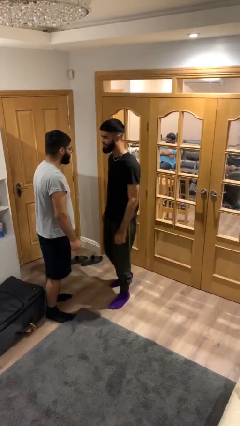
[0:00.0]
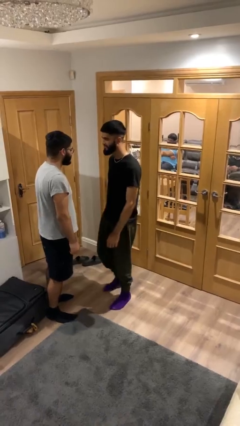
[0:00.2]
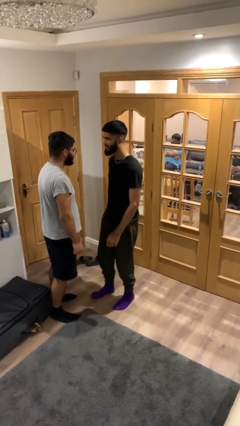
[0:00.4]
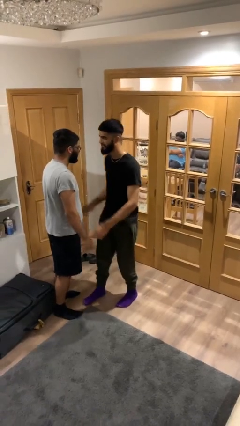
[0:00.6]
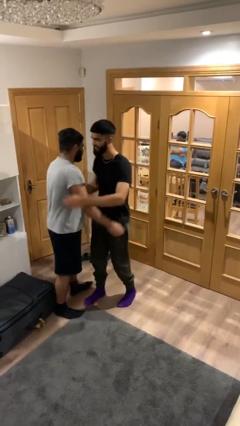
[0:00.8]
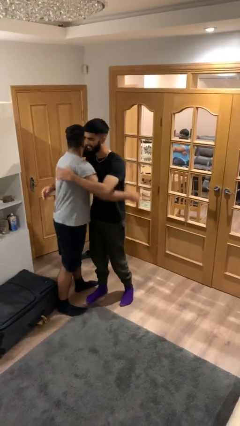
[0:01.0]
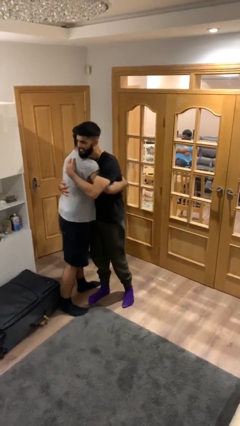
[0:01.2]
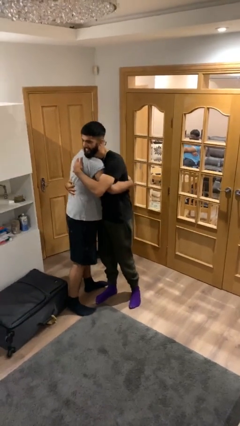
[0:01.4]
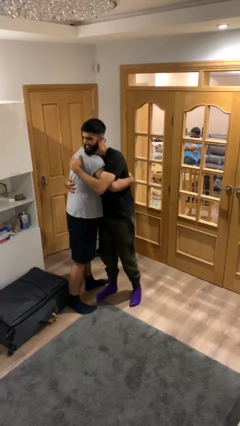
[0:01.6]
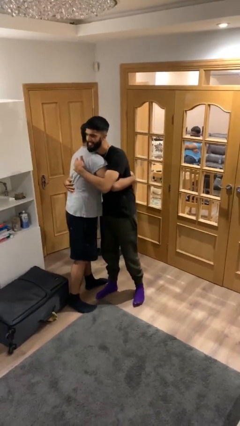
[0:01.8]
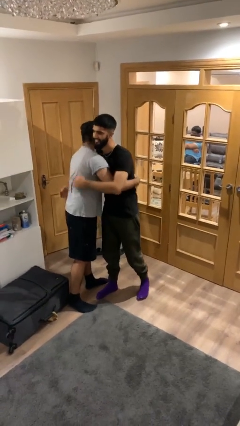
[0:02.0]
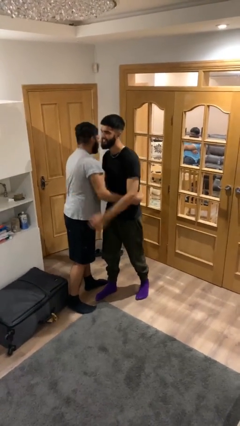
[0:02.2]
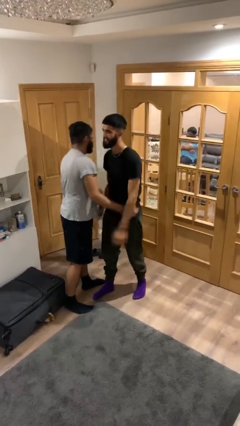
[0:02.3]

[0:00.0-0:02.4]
person embraces person

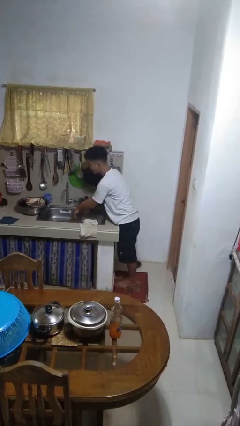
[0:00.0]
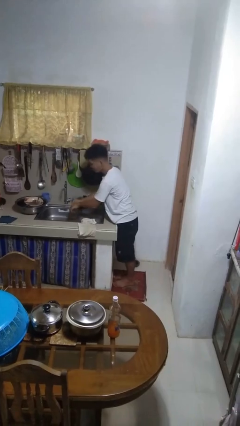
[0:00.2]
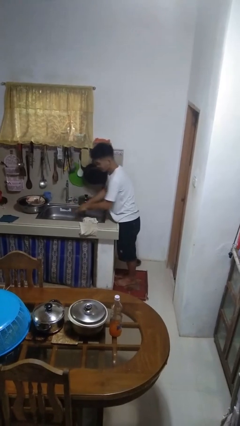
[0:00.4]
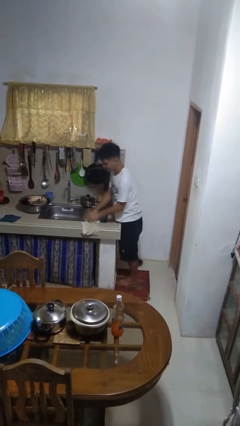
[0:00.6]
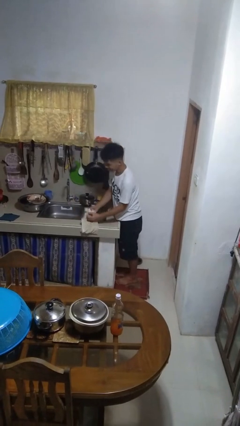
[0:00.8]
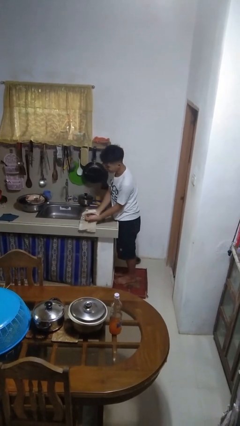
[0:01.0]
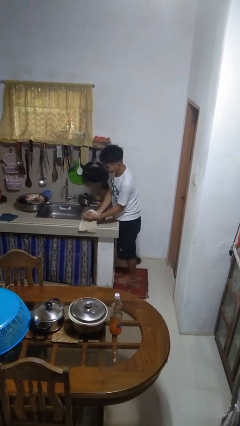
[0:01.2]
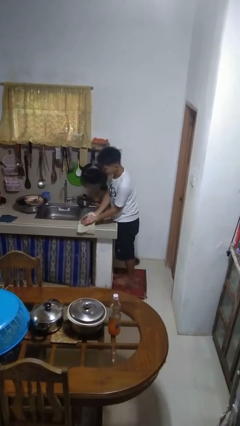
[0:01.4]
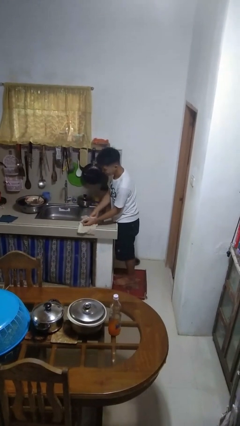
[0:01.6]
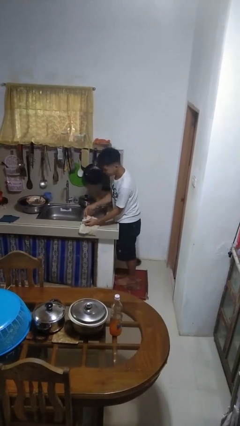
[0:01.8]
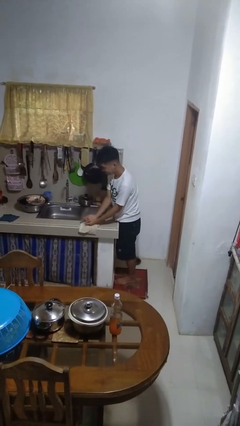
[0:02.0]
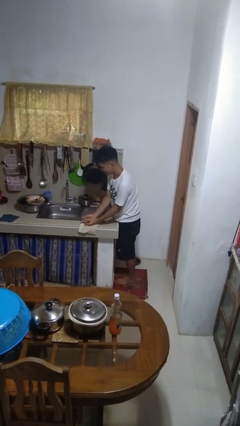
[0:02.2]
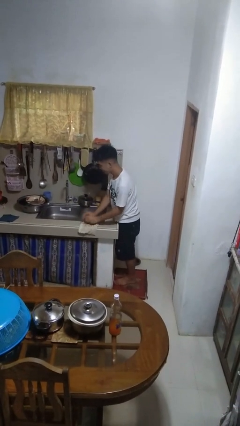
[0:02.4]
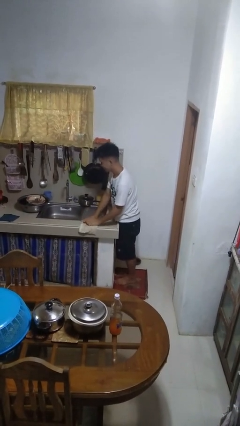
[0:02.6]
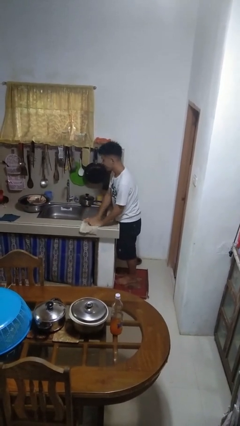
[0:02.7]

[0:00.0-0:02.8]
person dries hands with towel

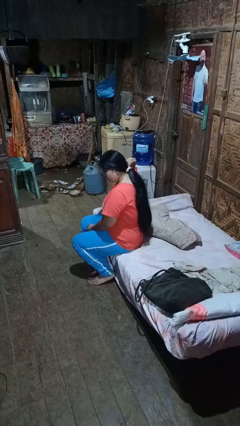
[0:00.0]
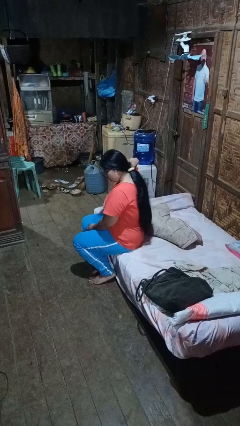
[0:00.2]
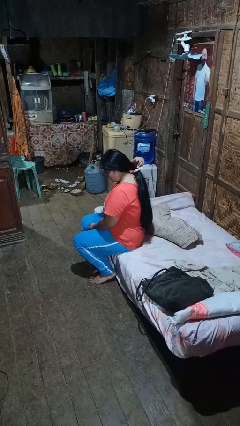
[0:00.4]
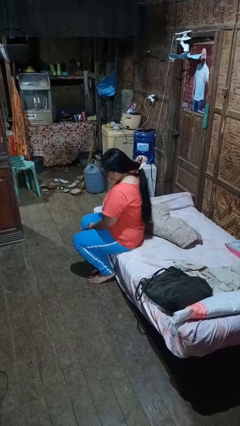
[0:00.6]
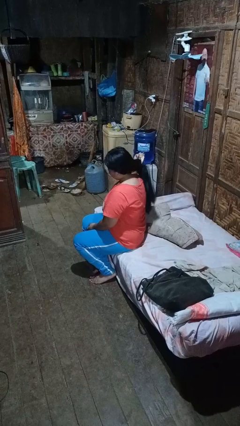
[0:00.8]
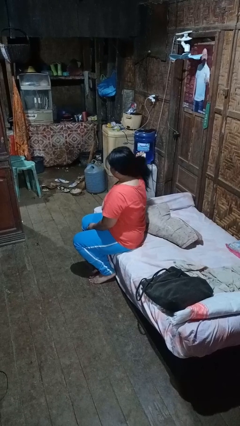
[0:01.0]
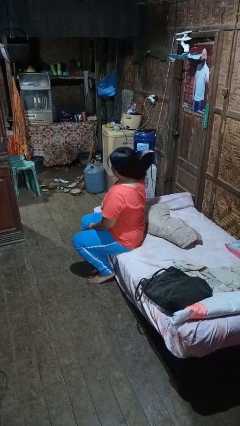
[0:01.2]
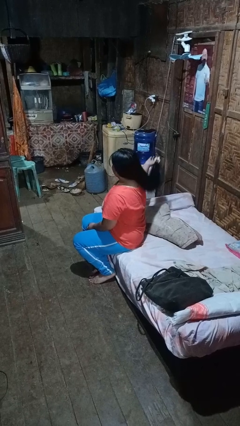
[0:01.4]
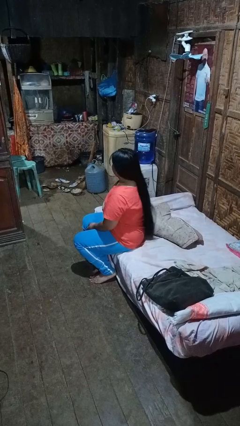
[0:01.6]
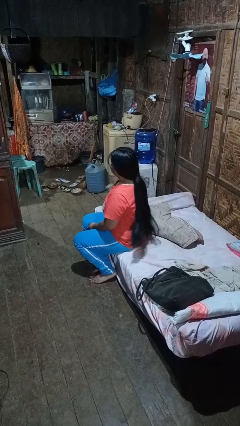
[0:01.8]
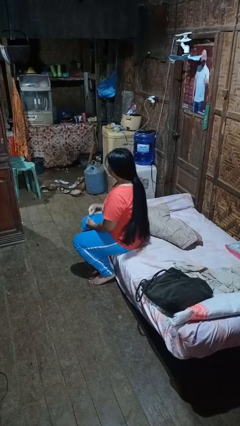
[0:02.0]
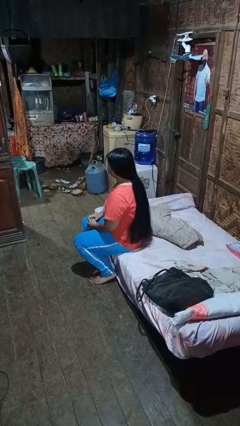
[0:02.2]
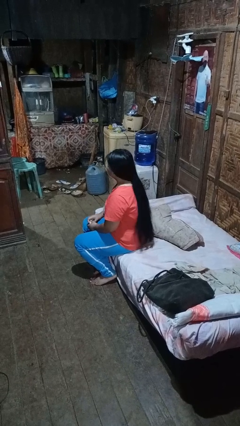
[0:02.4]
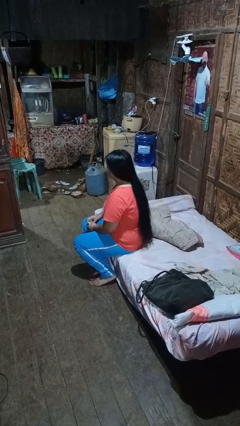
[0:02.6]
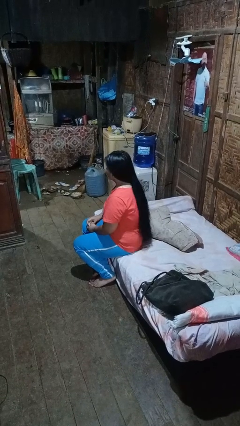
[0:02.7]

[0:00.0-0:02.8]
person takes off hairtie

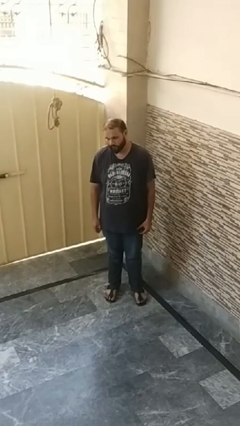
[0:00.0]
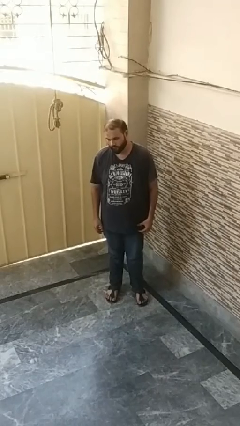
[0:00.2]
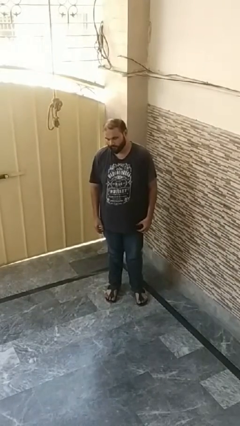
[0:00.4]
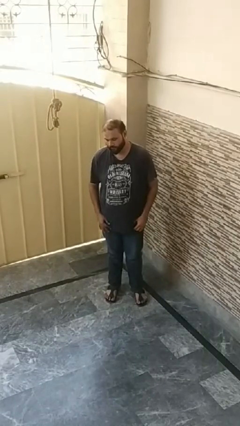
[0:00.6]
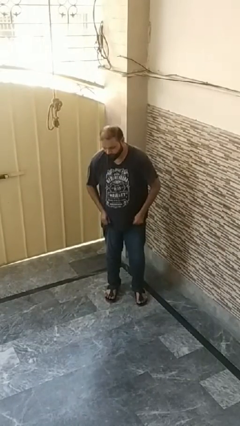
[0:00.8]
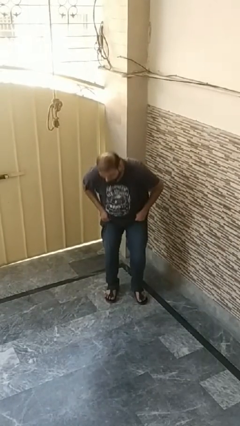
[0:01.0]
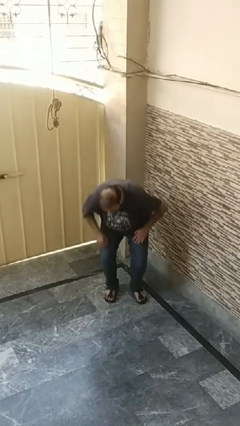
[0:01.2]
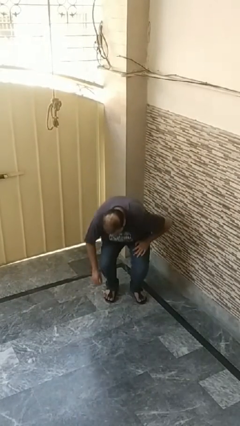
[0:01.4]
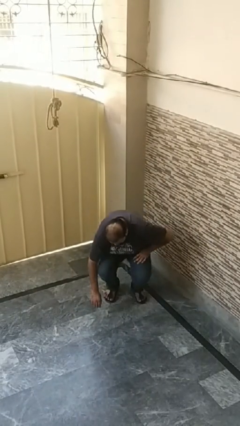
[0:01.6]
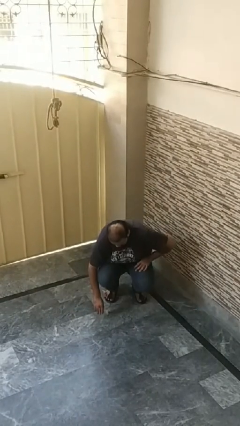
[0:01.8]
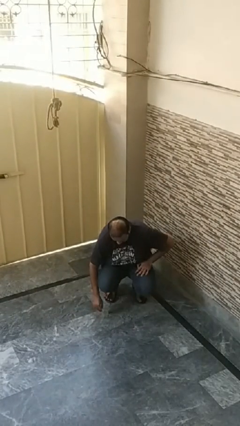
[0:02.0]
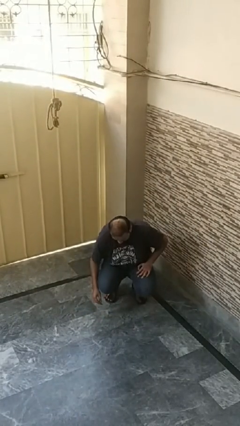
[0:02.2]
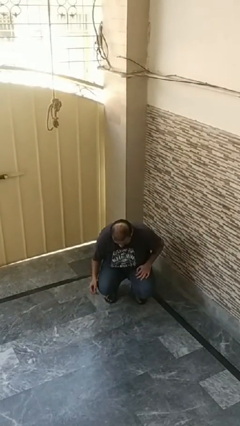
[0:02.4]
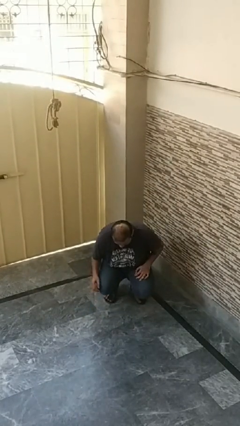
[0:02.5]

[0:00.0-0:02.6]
person falls while standing

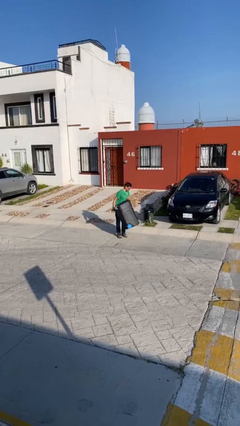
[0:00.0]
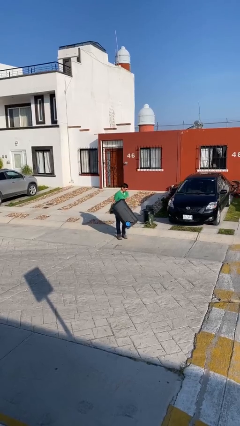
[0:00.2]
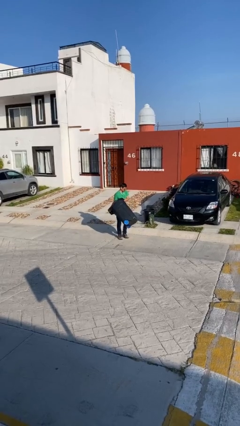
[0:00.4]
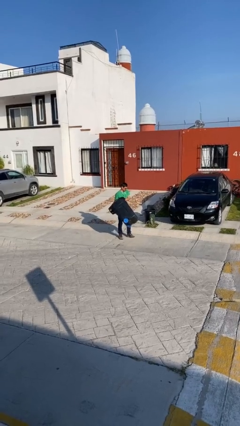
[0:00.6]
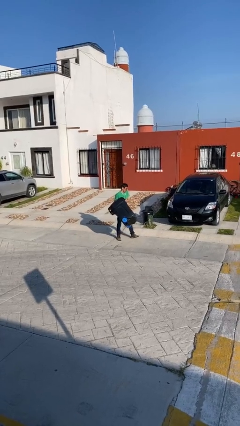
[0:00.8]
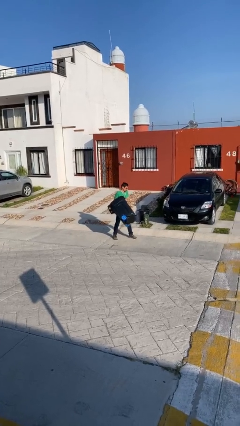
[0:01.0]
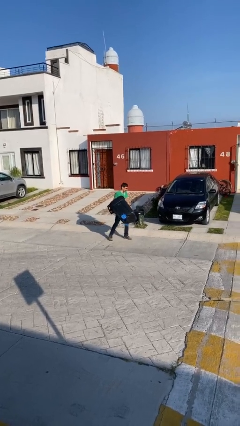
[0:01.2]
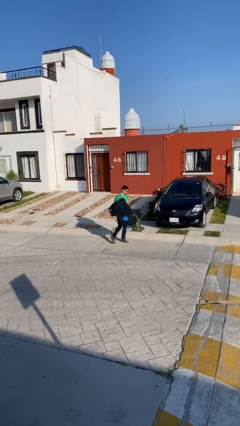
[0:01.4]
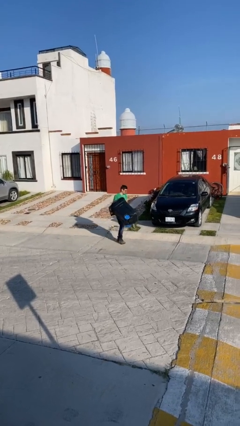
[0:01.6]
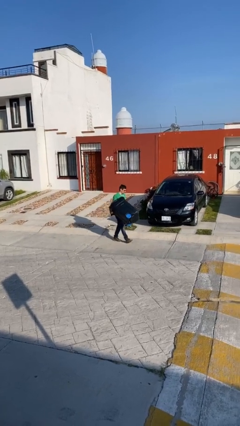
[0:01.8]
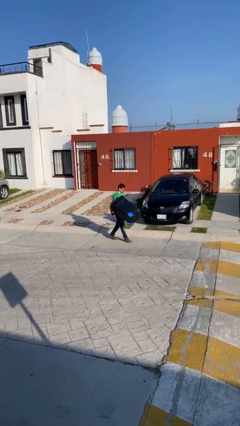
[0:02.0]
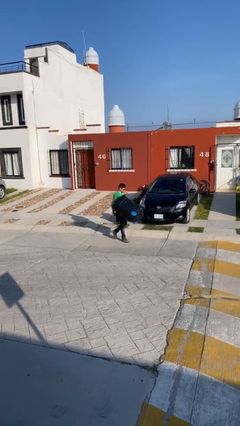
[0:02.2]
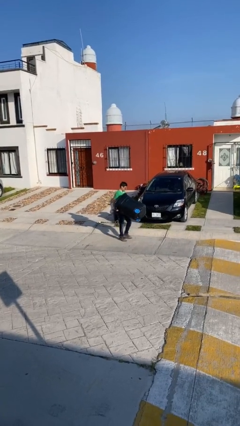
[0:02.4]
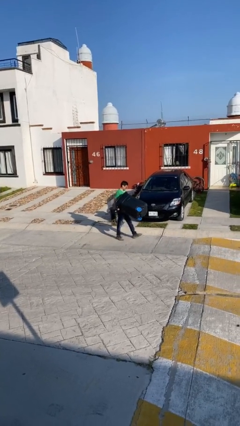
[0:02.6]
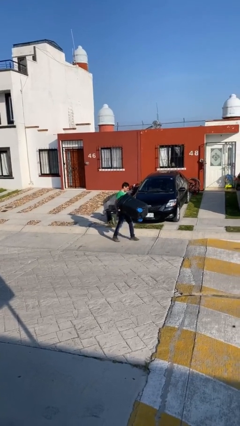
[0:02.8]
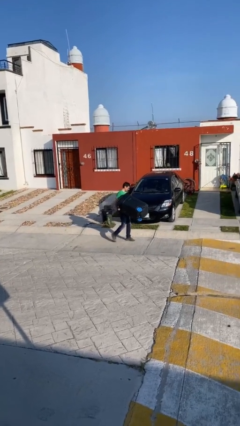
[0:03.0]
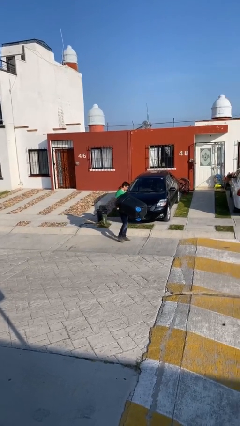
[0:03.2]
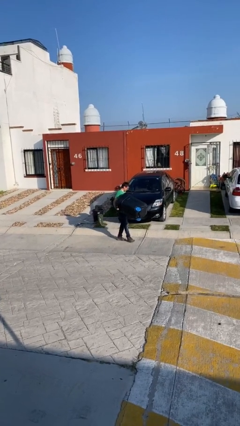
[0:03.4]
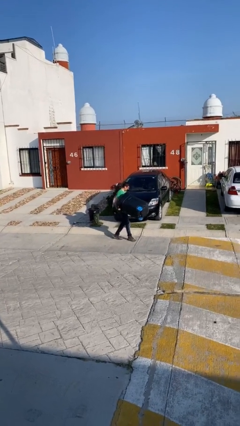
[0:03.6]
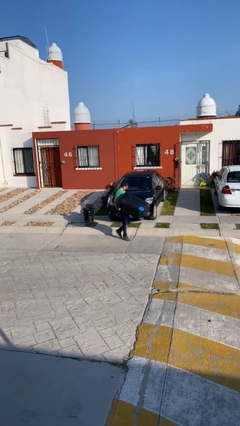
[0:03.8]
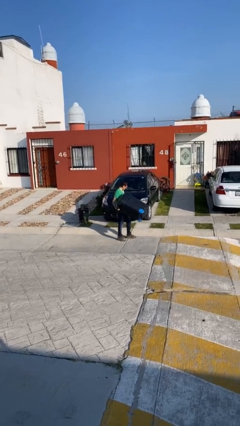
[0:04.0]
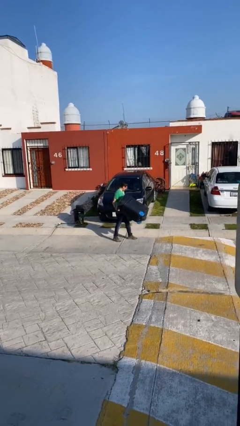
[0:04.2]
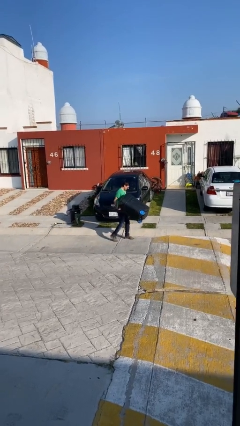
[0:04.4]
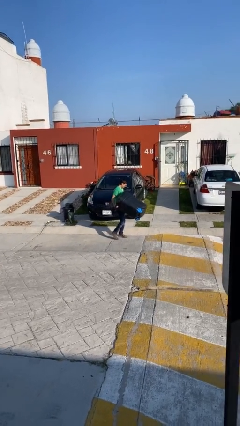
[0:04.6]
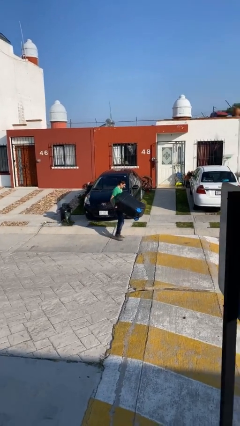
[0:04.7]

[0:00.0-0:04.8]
person carries heavy object

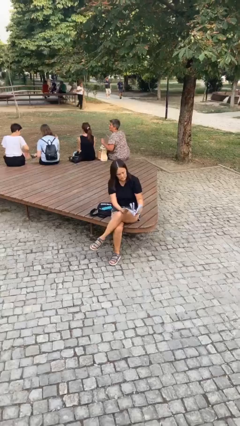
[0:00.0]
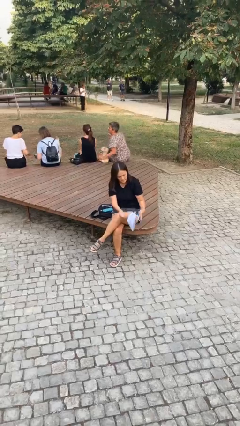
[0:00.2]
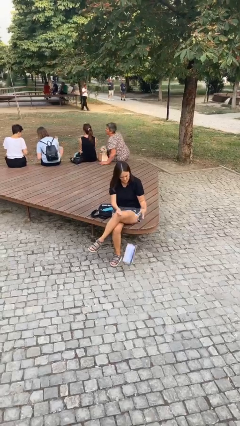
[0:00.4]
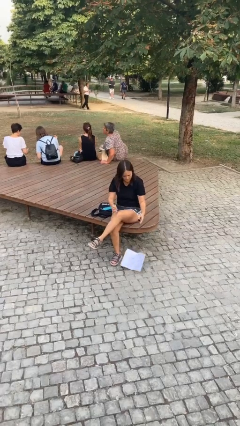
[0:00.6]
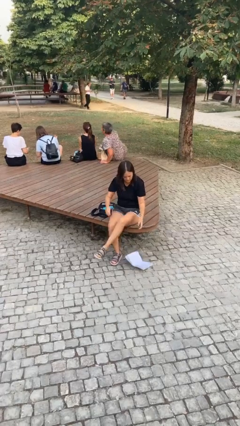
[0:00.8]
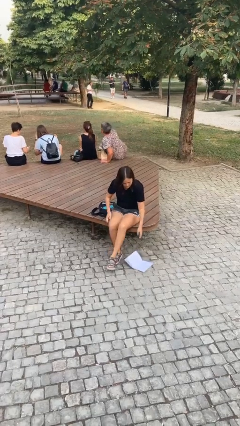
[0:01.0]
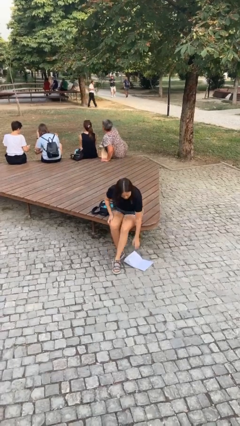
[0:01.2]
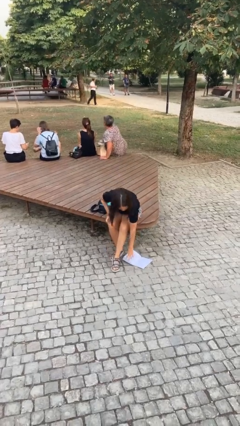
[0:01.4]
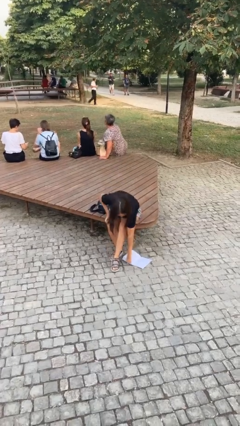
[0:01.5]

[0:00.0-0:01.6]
person drops object

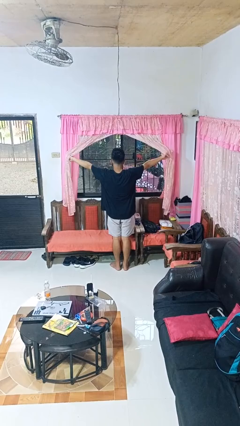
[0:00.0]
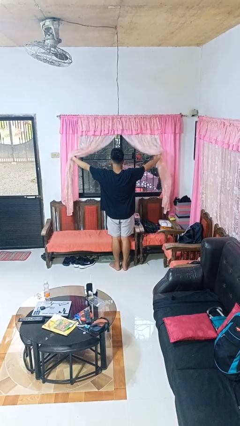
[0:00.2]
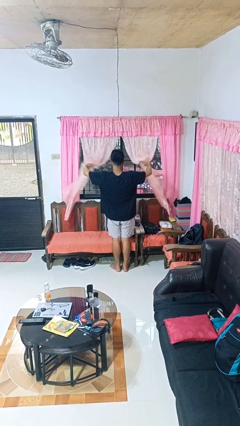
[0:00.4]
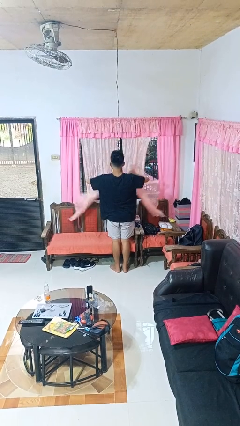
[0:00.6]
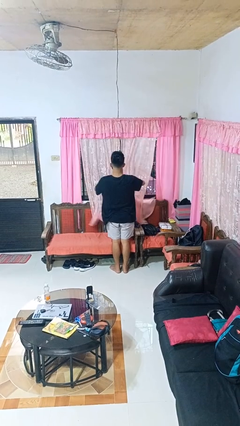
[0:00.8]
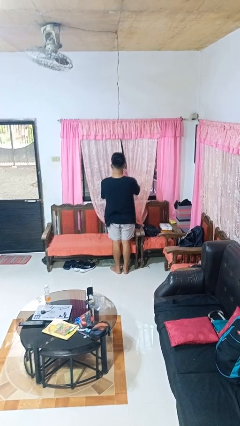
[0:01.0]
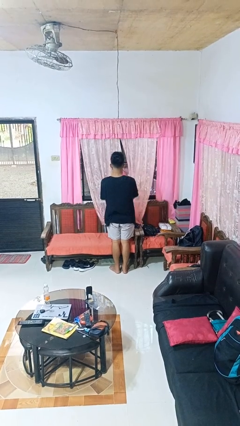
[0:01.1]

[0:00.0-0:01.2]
person closes curtains
